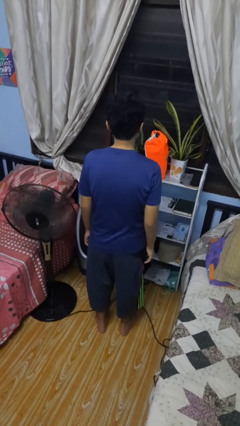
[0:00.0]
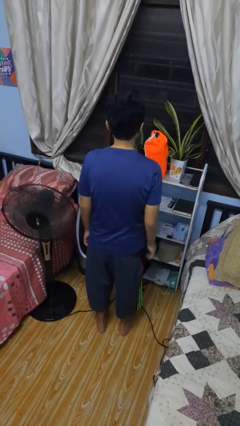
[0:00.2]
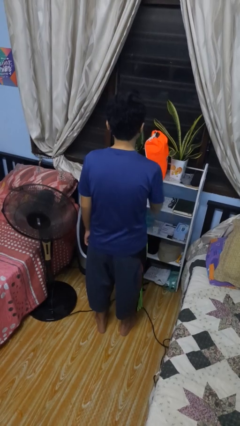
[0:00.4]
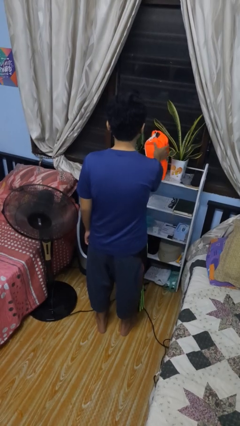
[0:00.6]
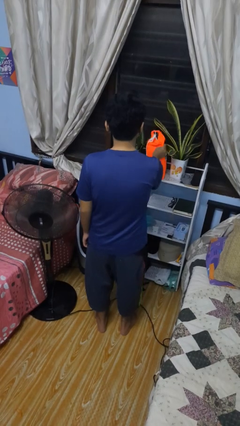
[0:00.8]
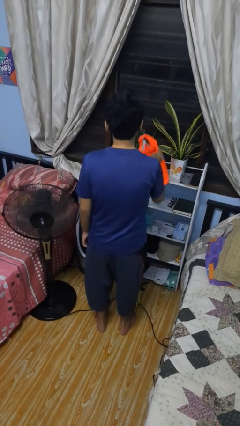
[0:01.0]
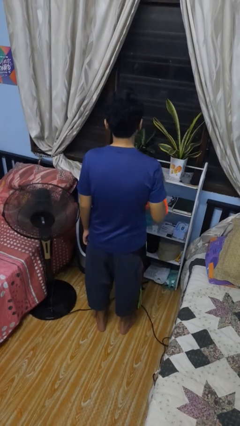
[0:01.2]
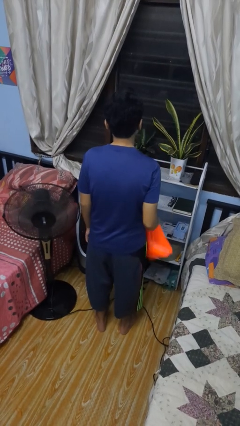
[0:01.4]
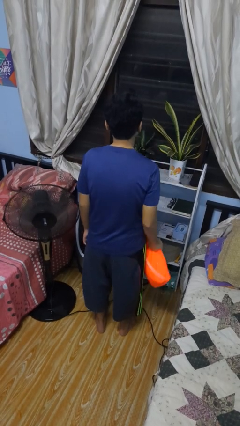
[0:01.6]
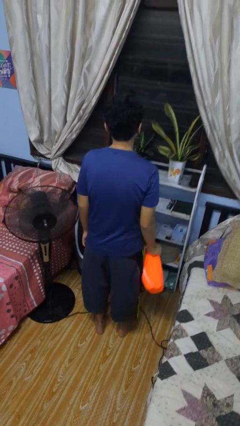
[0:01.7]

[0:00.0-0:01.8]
person picks up object from countertop

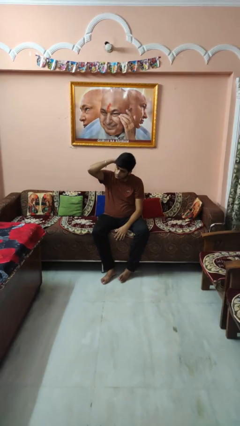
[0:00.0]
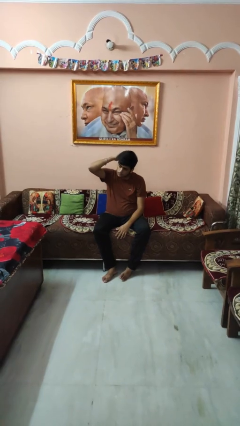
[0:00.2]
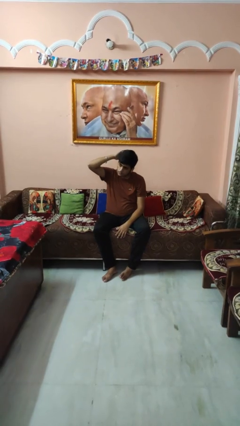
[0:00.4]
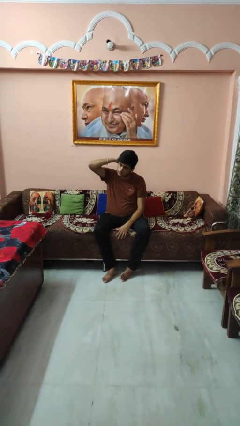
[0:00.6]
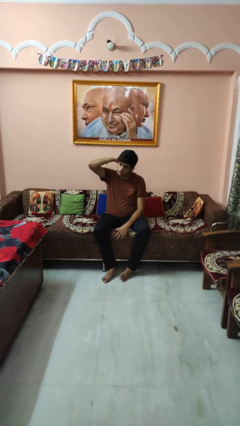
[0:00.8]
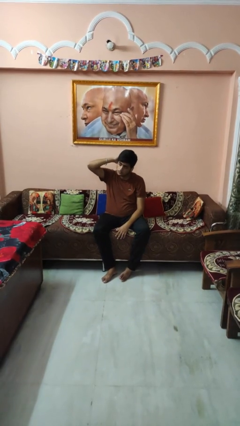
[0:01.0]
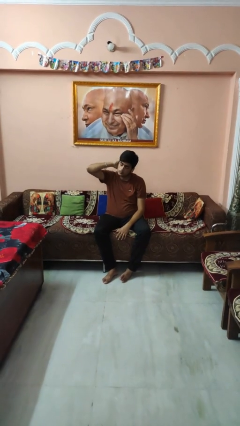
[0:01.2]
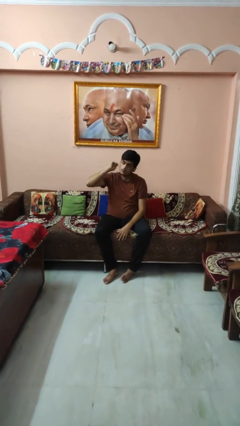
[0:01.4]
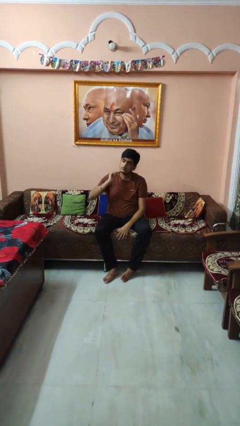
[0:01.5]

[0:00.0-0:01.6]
person pats head

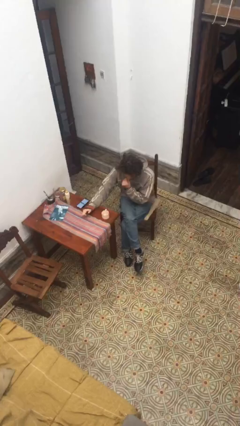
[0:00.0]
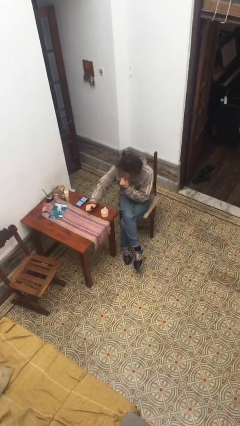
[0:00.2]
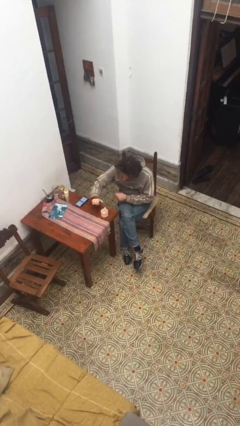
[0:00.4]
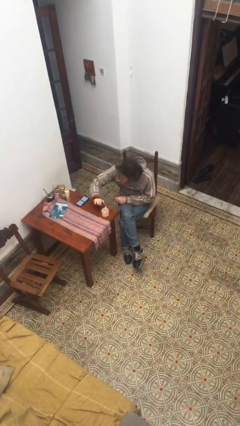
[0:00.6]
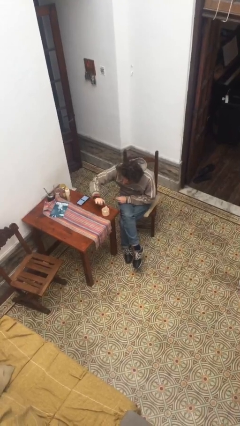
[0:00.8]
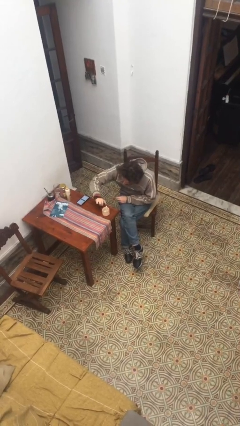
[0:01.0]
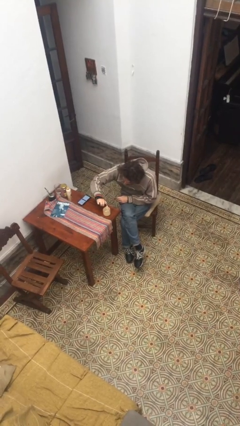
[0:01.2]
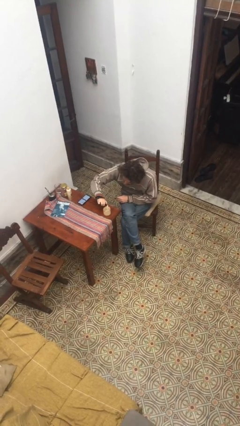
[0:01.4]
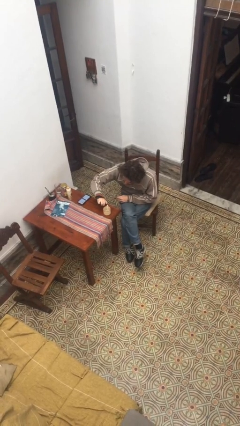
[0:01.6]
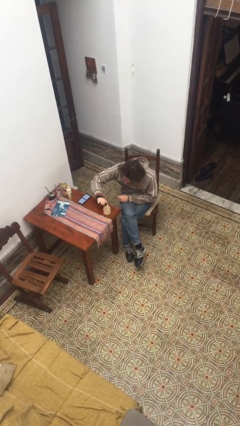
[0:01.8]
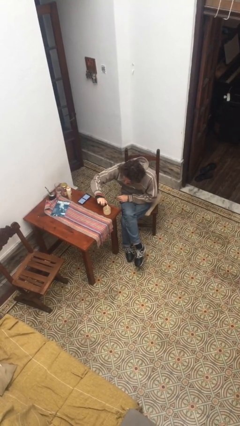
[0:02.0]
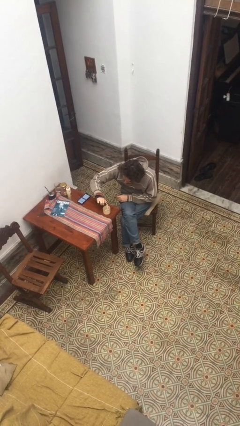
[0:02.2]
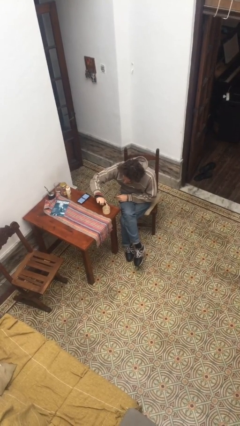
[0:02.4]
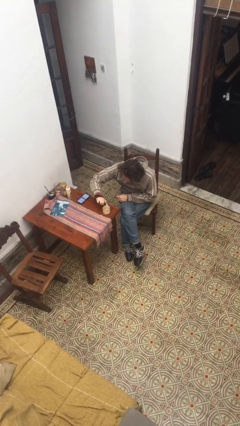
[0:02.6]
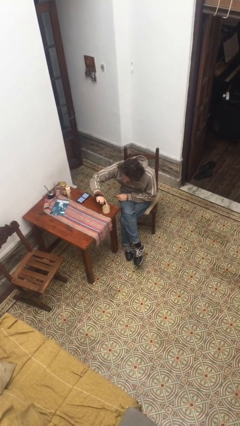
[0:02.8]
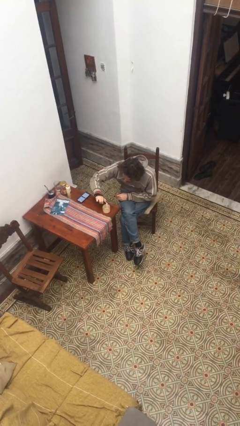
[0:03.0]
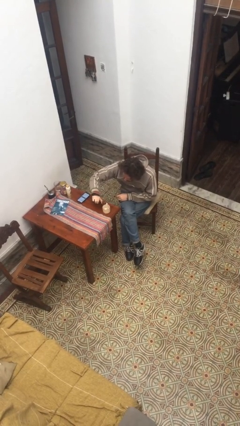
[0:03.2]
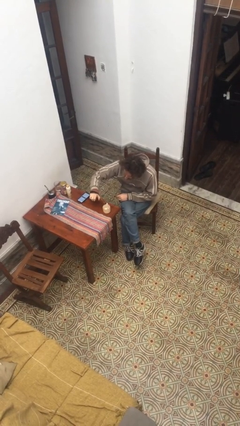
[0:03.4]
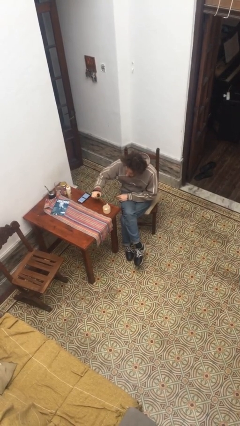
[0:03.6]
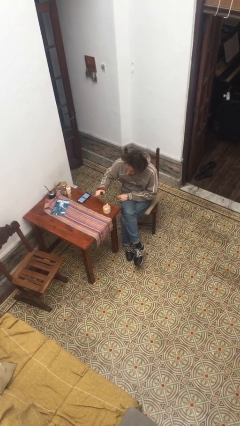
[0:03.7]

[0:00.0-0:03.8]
person lights candle

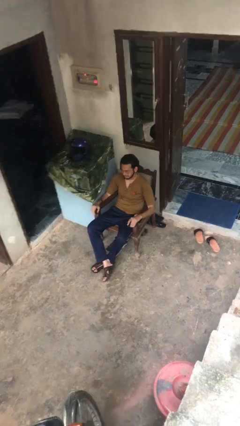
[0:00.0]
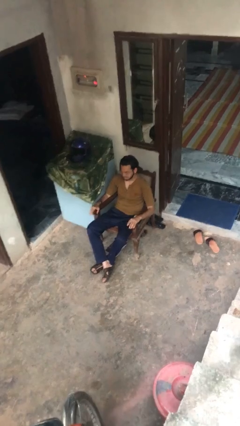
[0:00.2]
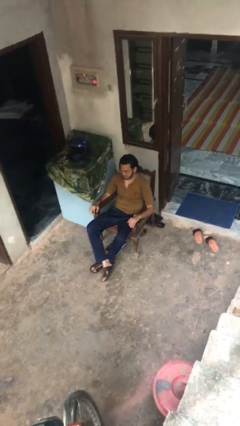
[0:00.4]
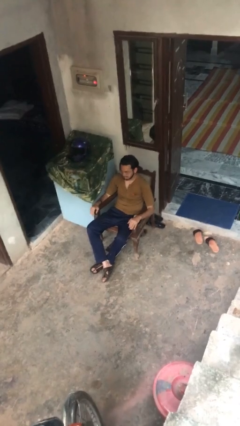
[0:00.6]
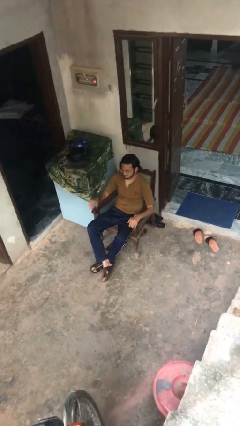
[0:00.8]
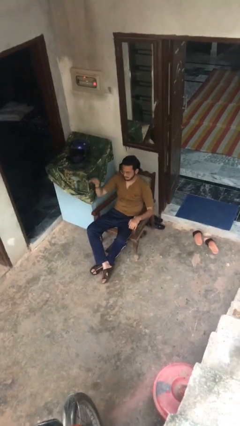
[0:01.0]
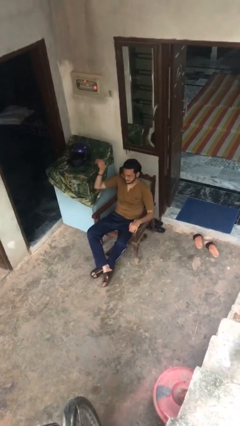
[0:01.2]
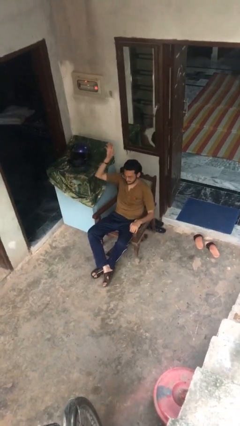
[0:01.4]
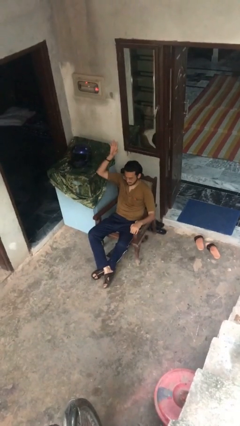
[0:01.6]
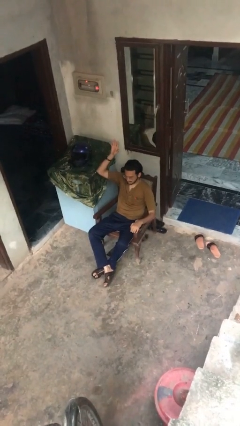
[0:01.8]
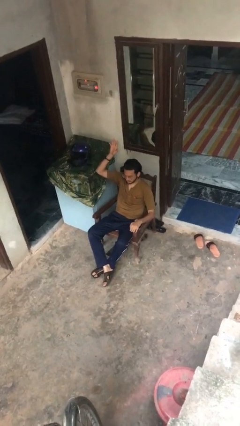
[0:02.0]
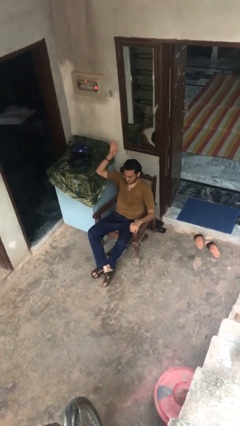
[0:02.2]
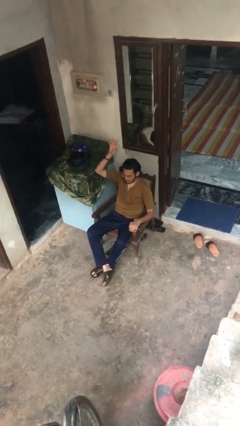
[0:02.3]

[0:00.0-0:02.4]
person gestures raise hand

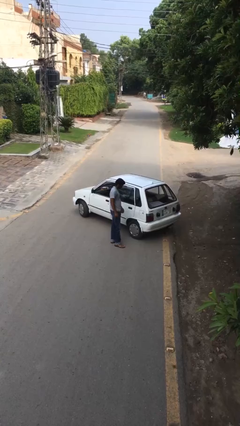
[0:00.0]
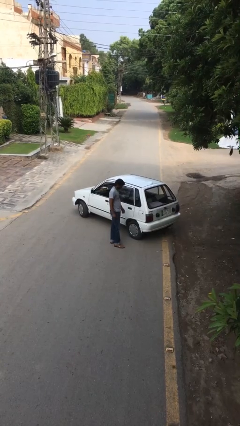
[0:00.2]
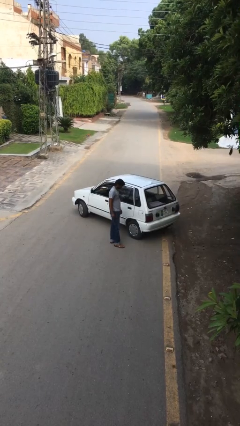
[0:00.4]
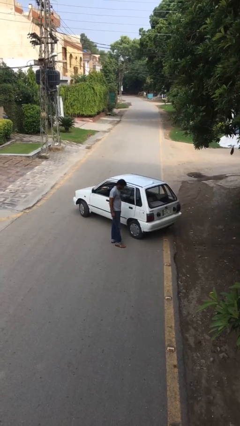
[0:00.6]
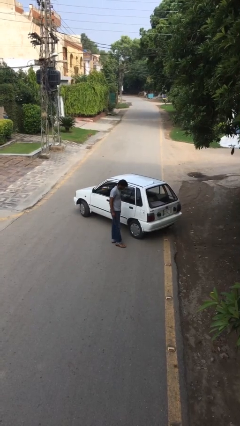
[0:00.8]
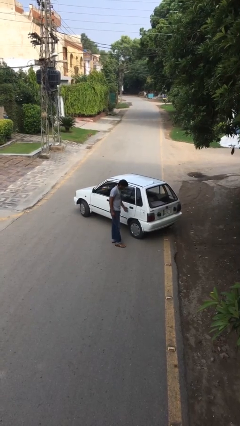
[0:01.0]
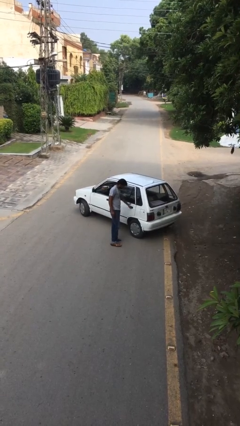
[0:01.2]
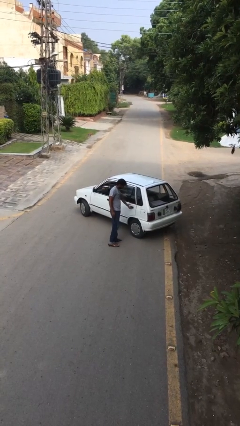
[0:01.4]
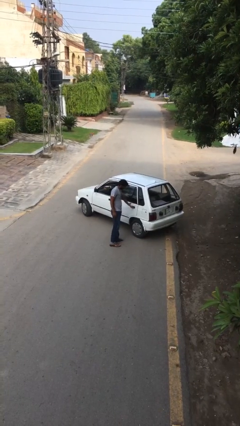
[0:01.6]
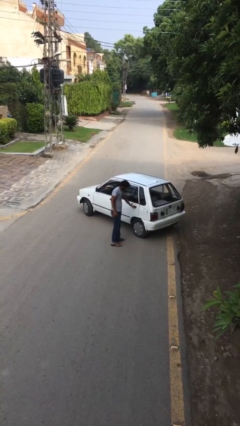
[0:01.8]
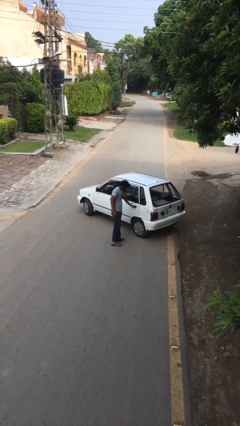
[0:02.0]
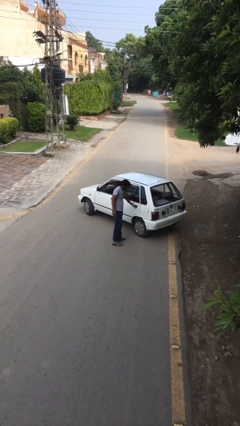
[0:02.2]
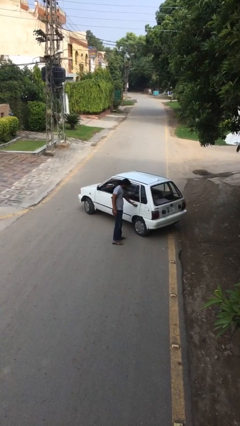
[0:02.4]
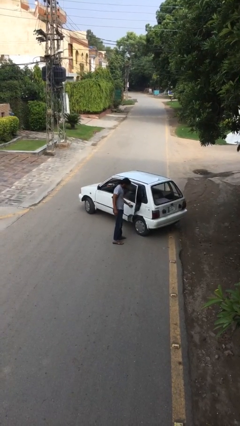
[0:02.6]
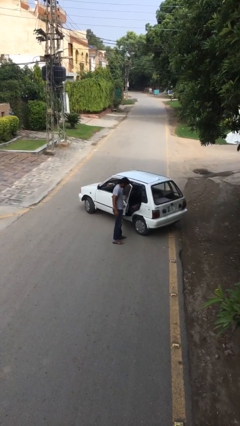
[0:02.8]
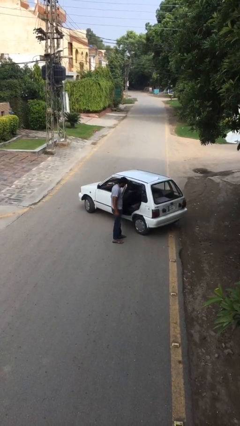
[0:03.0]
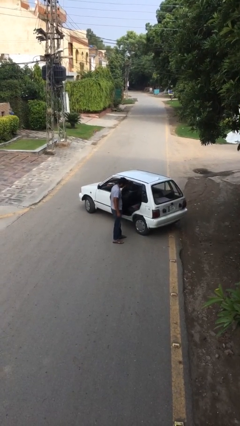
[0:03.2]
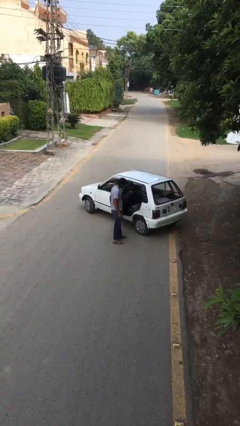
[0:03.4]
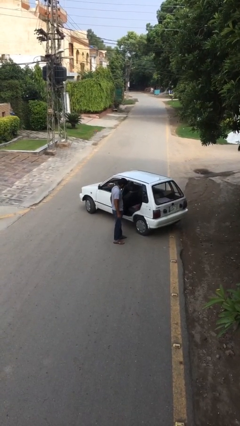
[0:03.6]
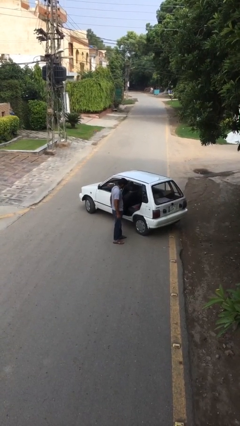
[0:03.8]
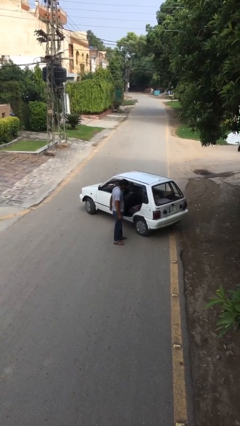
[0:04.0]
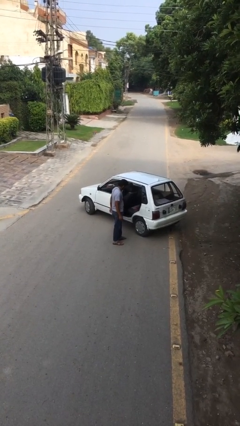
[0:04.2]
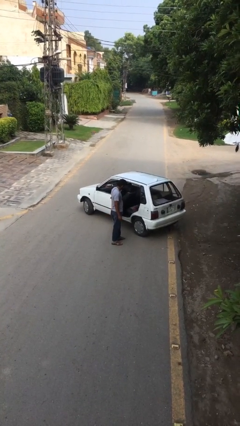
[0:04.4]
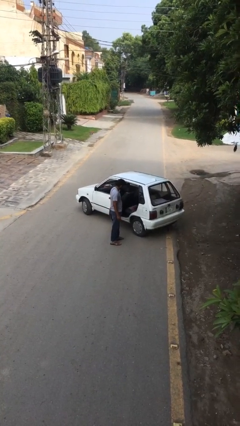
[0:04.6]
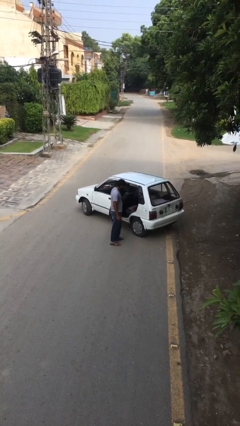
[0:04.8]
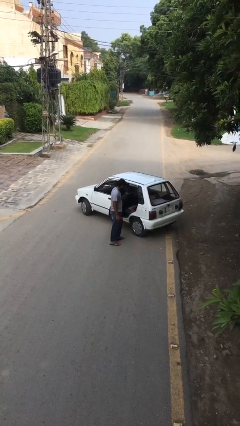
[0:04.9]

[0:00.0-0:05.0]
person opens car door

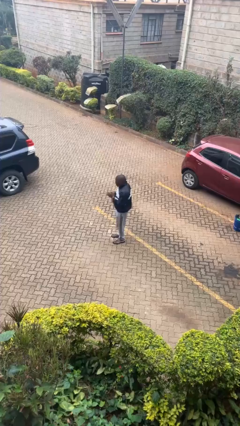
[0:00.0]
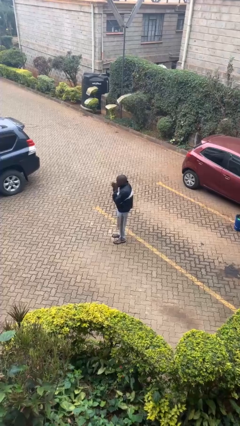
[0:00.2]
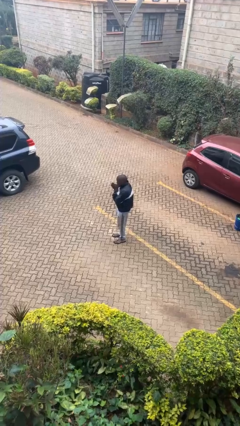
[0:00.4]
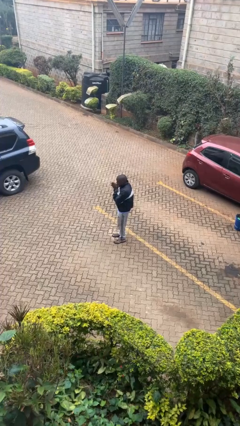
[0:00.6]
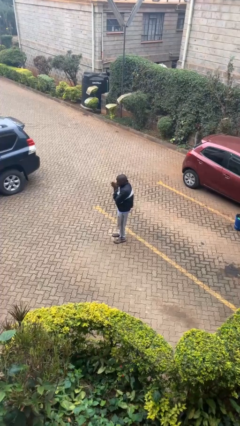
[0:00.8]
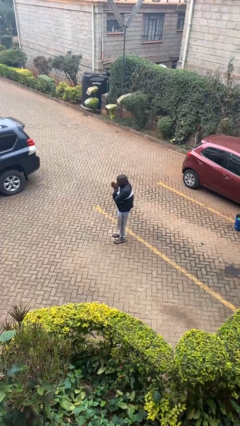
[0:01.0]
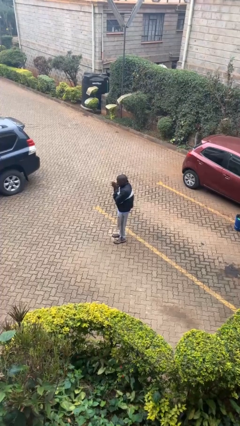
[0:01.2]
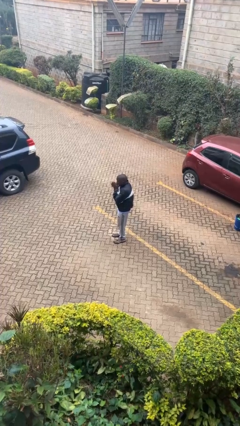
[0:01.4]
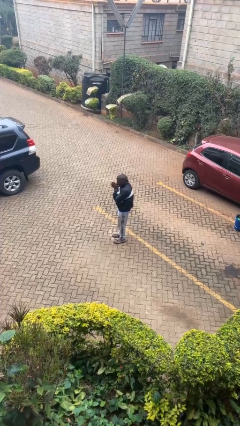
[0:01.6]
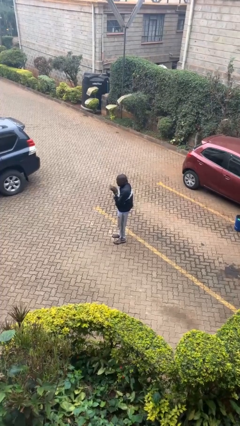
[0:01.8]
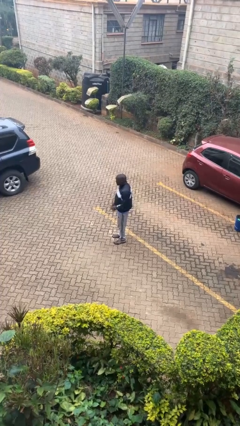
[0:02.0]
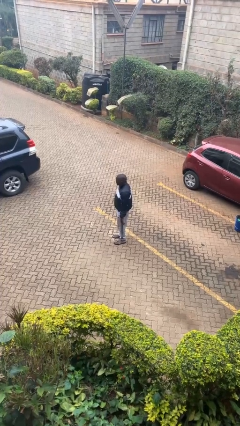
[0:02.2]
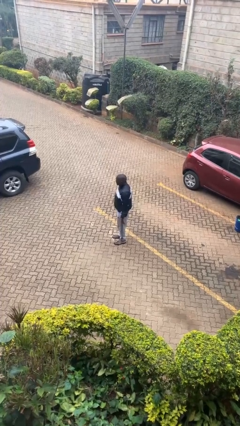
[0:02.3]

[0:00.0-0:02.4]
person blows into hands

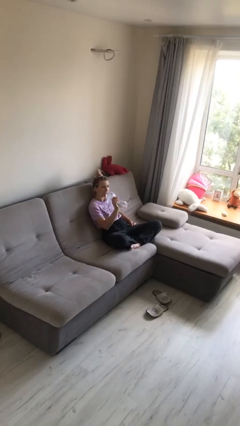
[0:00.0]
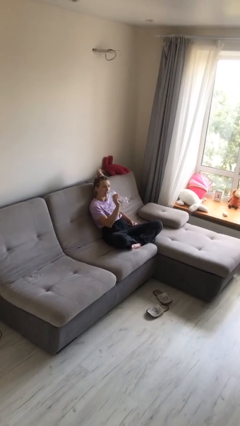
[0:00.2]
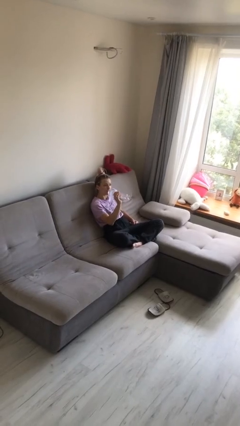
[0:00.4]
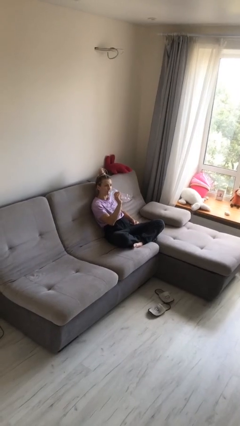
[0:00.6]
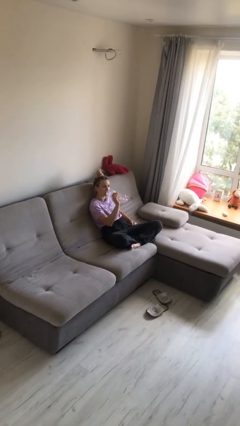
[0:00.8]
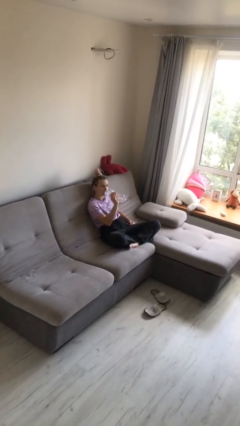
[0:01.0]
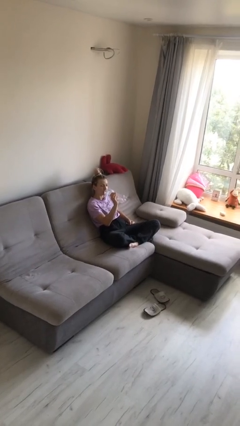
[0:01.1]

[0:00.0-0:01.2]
person drinks from bottle
